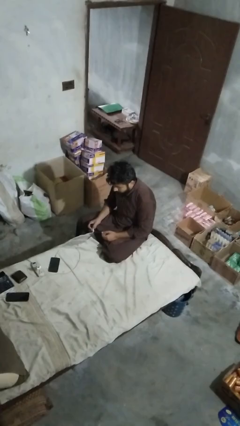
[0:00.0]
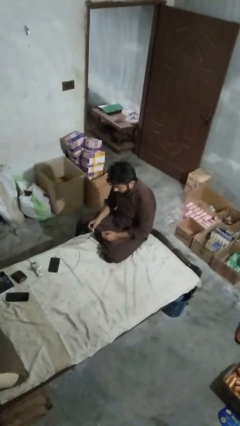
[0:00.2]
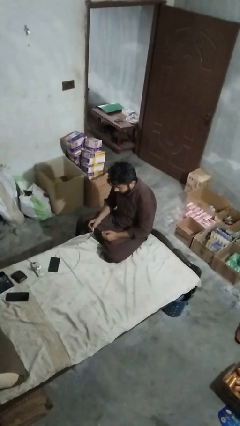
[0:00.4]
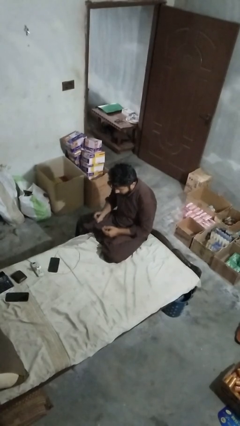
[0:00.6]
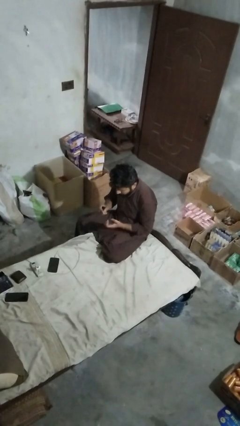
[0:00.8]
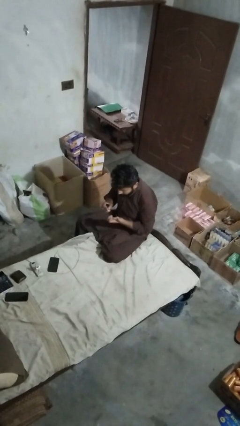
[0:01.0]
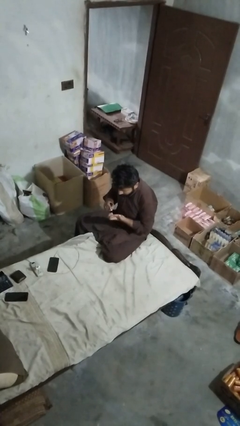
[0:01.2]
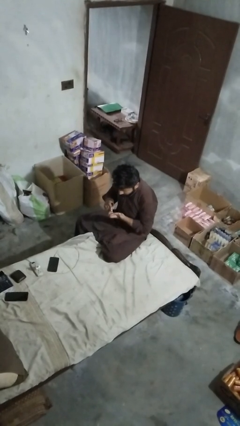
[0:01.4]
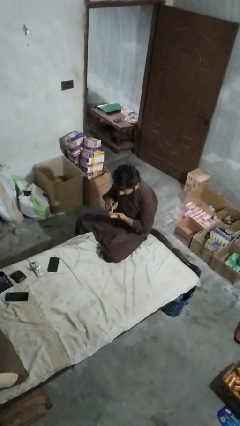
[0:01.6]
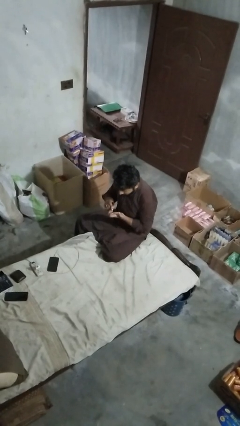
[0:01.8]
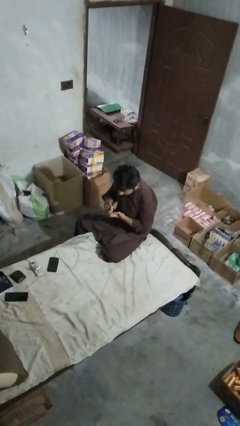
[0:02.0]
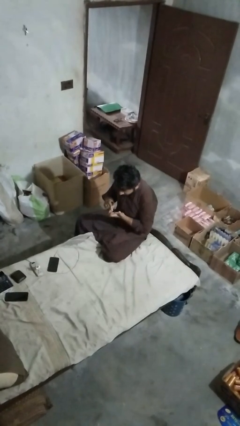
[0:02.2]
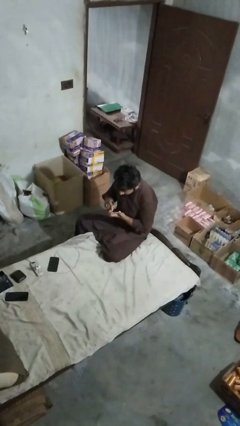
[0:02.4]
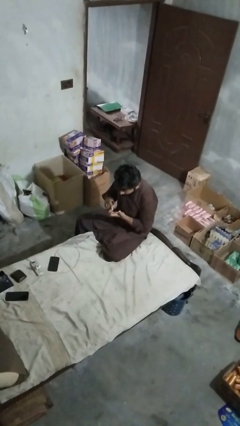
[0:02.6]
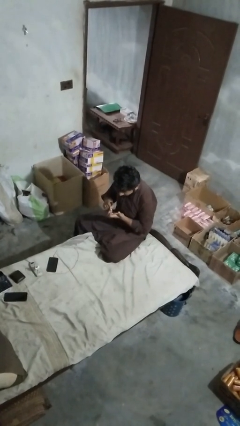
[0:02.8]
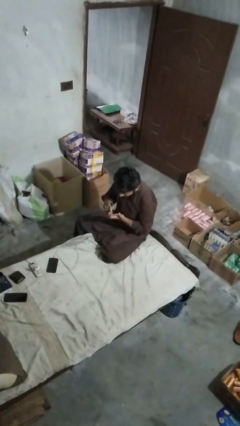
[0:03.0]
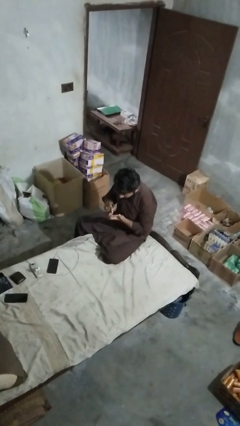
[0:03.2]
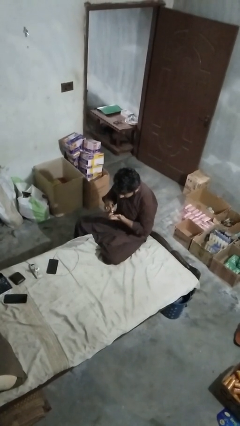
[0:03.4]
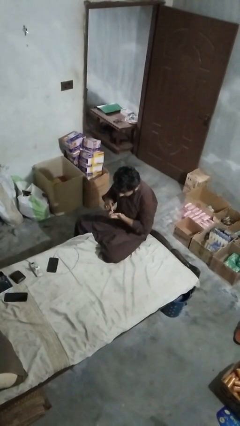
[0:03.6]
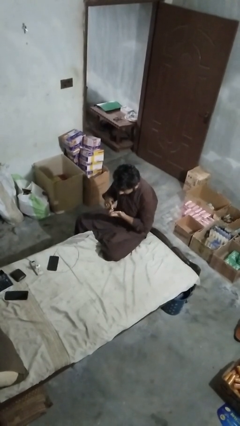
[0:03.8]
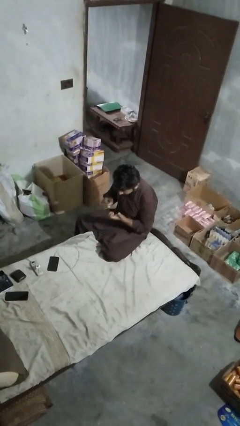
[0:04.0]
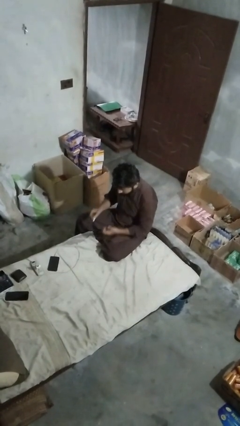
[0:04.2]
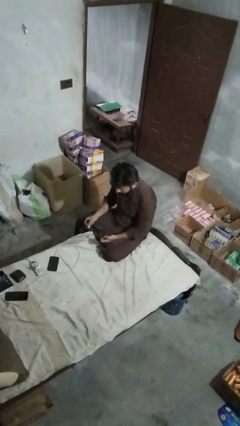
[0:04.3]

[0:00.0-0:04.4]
person paints fingernails

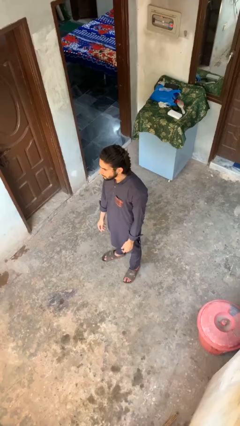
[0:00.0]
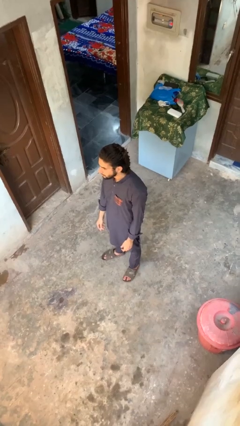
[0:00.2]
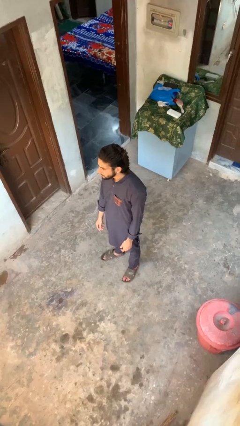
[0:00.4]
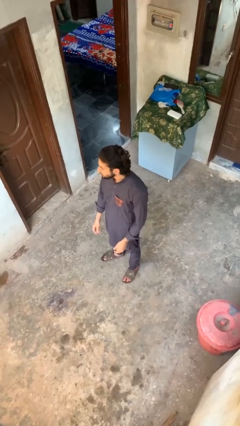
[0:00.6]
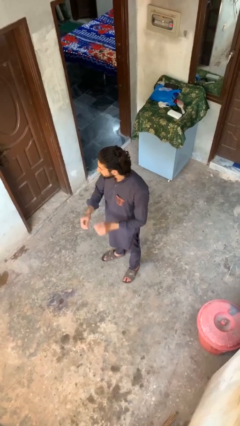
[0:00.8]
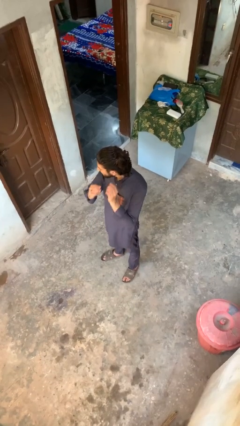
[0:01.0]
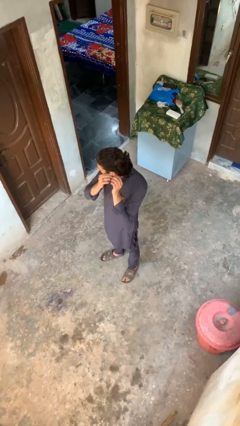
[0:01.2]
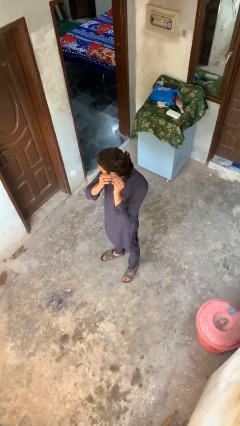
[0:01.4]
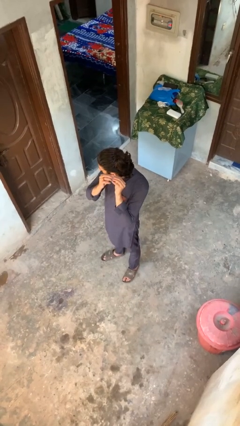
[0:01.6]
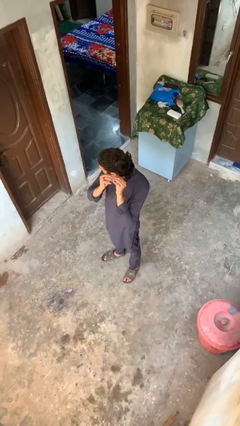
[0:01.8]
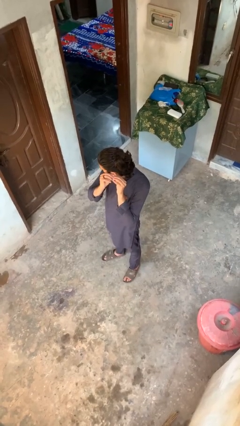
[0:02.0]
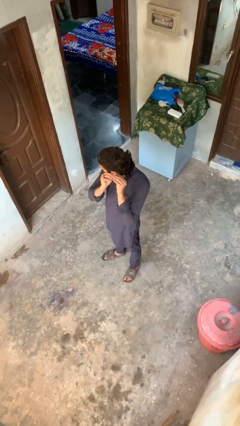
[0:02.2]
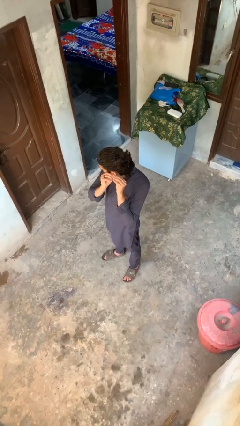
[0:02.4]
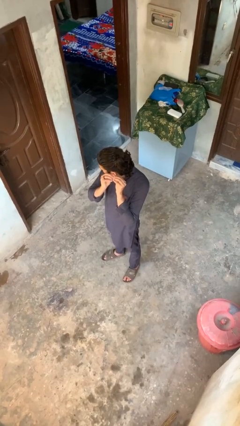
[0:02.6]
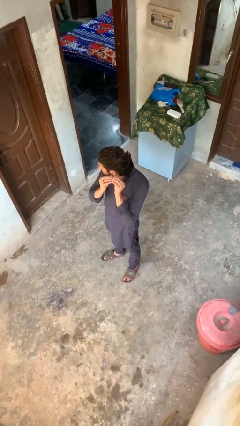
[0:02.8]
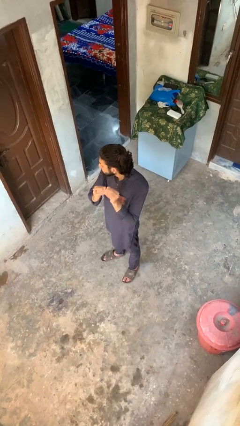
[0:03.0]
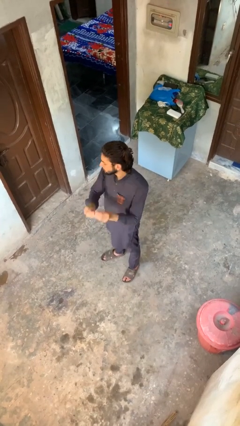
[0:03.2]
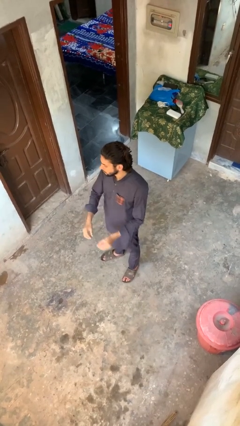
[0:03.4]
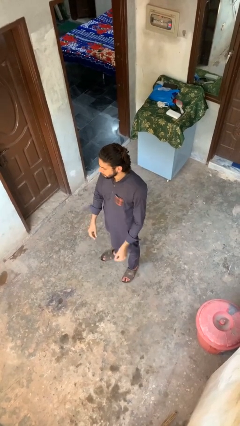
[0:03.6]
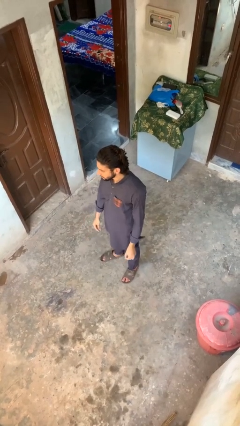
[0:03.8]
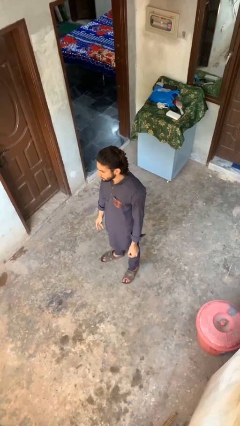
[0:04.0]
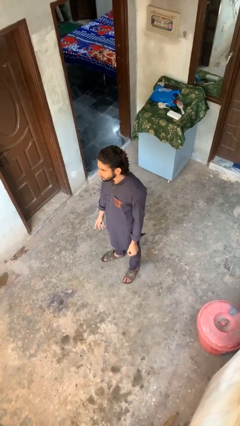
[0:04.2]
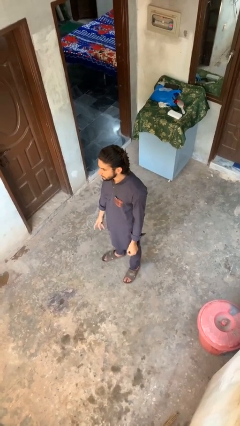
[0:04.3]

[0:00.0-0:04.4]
person takes off earrings

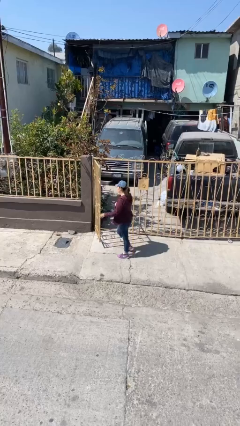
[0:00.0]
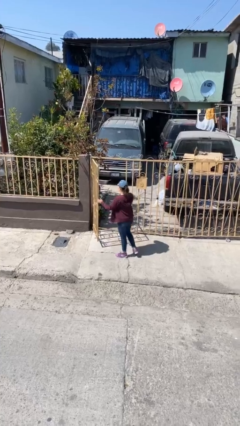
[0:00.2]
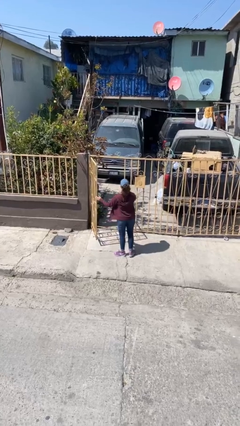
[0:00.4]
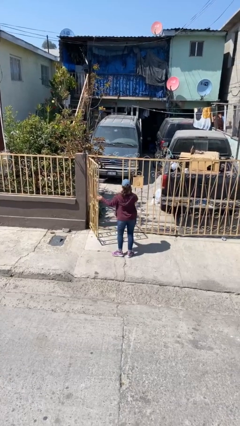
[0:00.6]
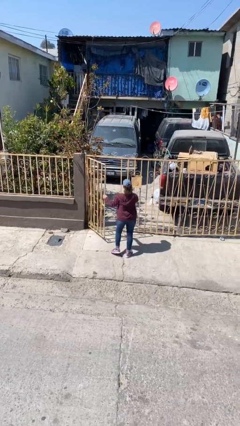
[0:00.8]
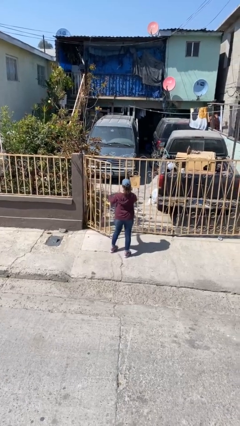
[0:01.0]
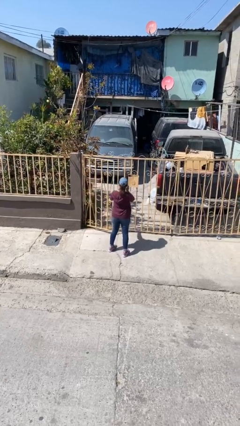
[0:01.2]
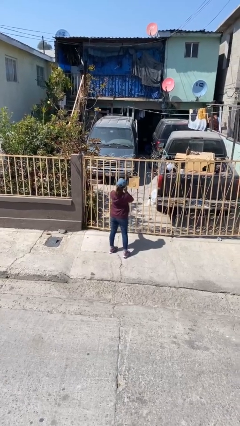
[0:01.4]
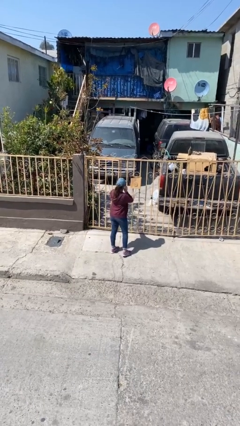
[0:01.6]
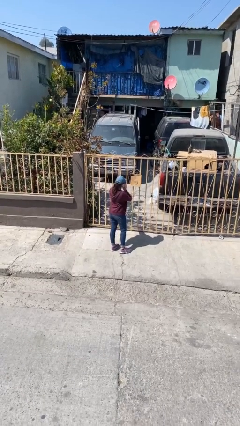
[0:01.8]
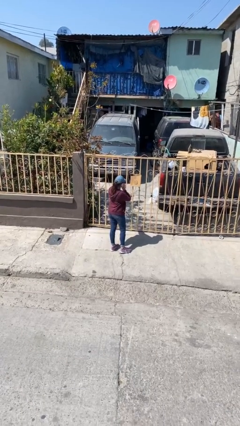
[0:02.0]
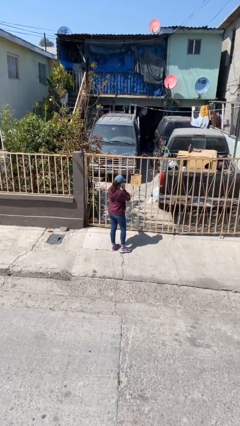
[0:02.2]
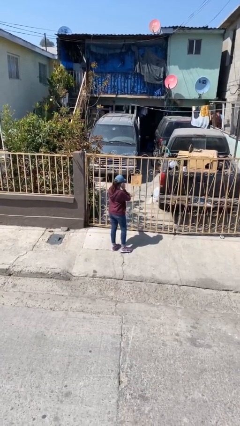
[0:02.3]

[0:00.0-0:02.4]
person closes facility door

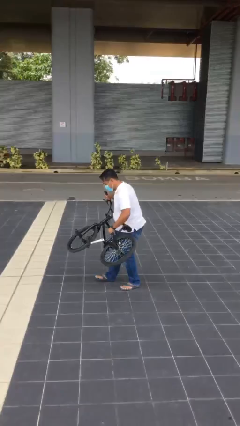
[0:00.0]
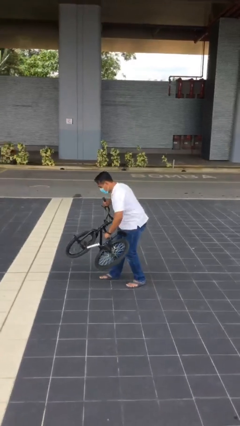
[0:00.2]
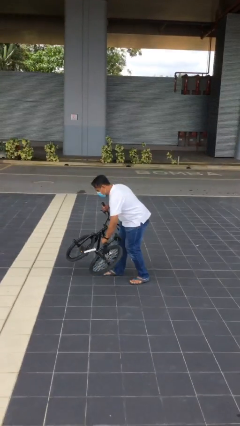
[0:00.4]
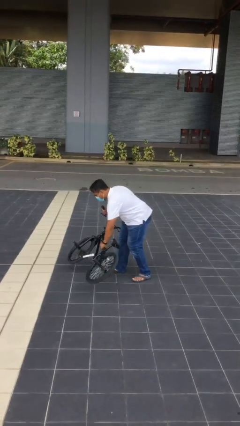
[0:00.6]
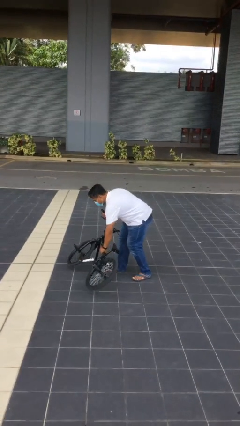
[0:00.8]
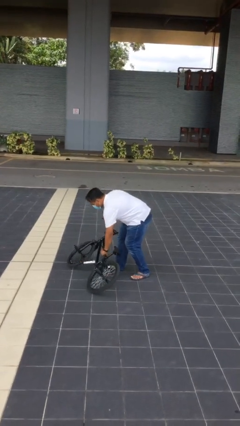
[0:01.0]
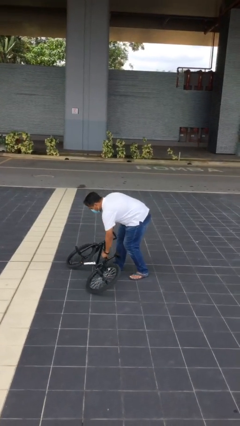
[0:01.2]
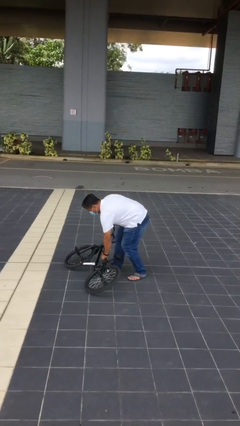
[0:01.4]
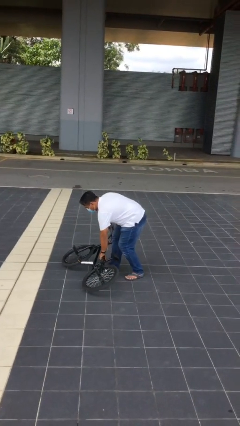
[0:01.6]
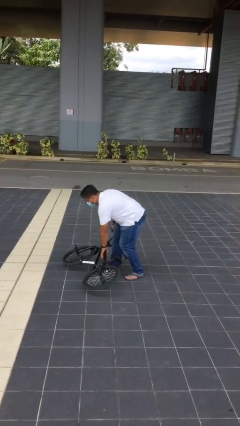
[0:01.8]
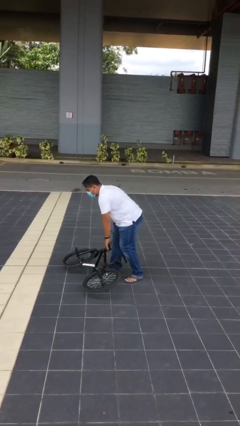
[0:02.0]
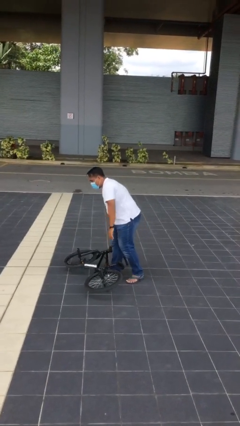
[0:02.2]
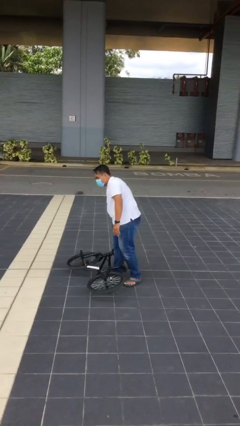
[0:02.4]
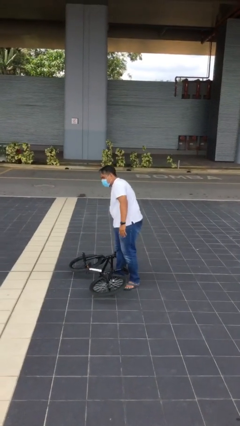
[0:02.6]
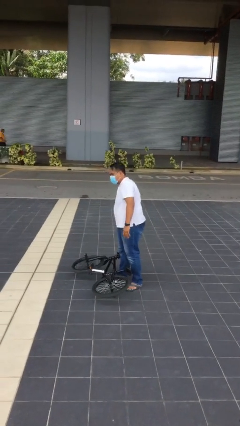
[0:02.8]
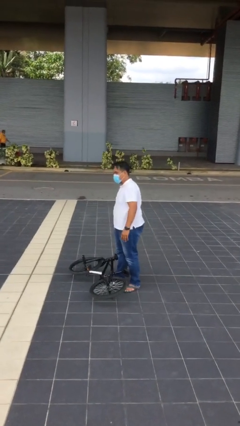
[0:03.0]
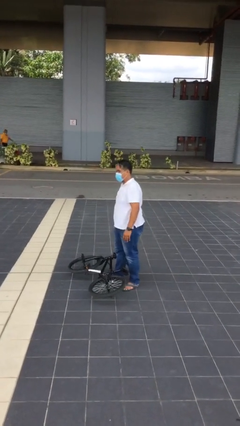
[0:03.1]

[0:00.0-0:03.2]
person puts down object on floor

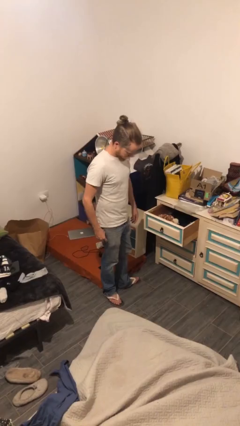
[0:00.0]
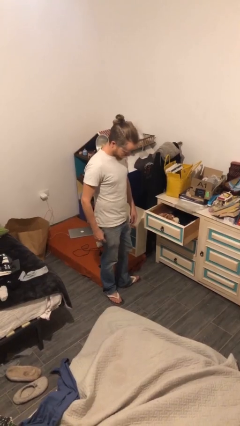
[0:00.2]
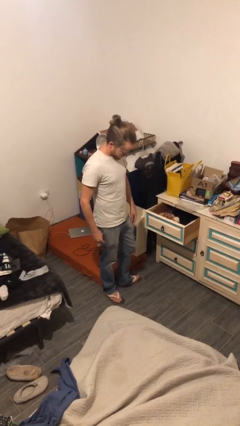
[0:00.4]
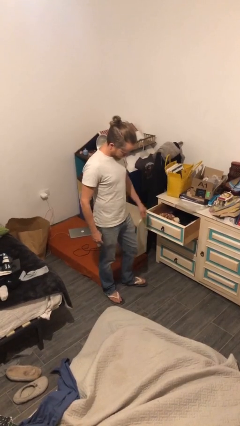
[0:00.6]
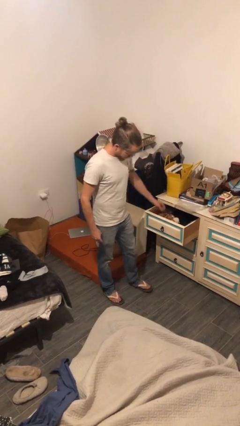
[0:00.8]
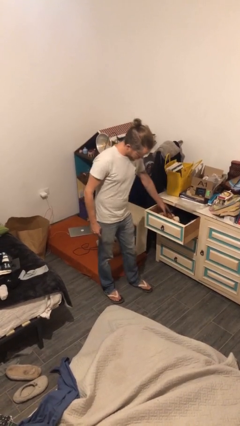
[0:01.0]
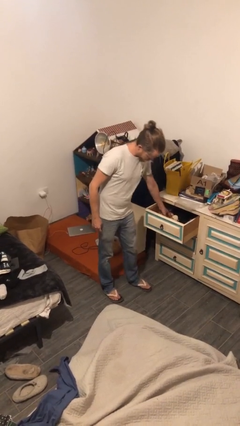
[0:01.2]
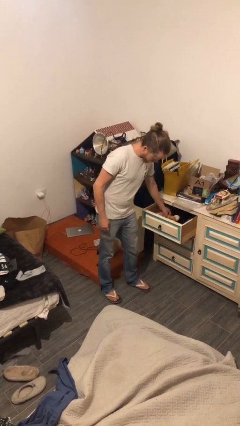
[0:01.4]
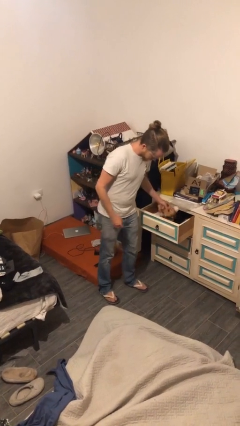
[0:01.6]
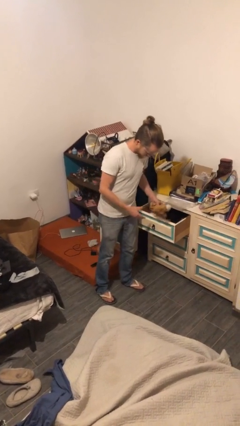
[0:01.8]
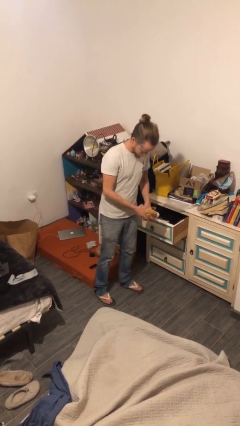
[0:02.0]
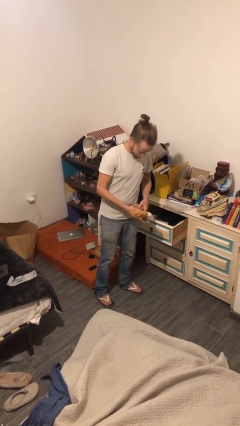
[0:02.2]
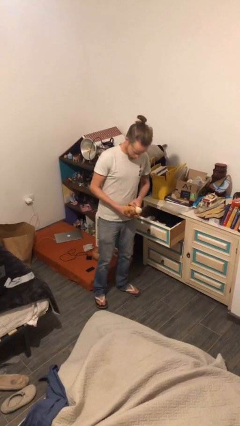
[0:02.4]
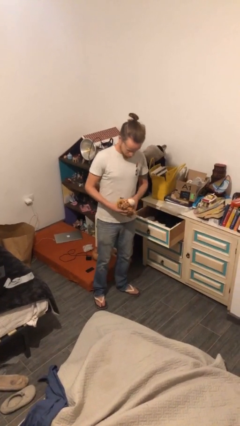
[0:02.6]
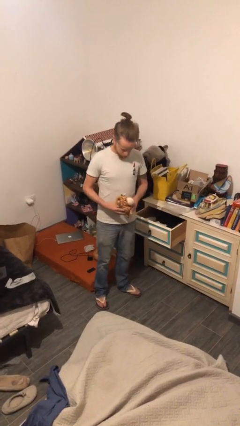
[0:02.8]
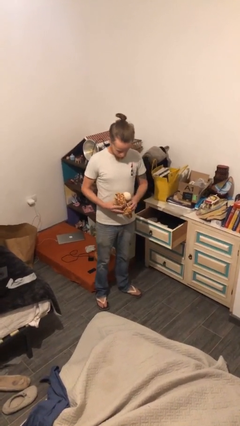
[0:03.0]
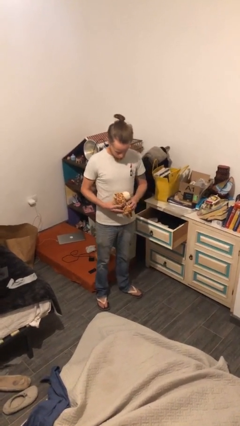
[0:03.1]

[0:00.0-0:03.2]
person picks up object from cabinet
